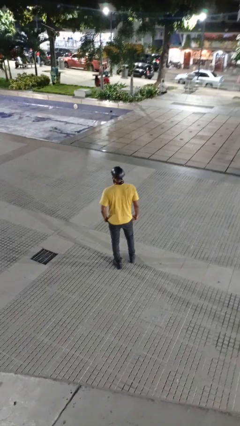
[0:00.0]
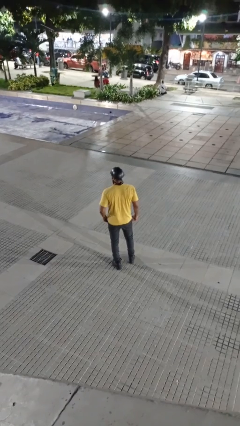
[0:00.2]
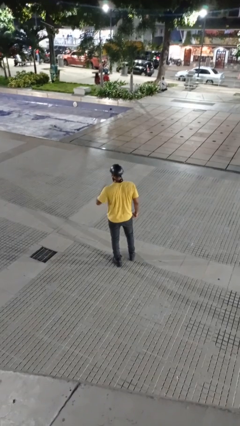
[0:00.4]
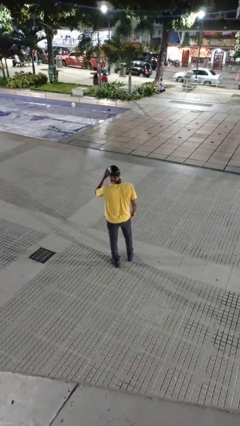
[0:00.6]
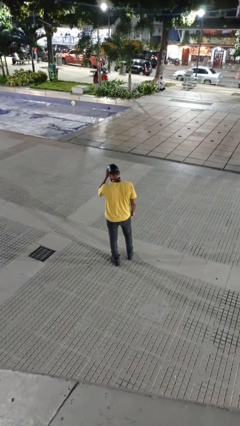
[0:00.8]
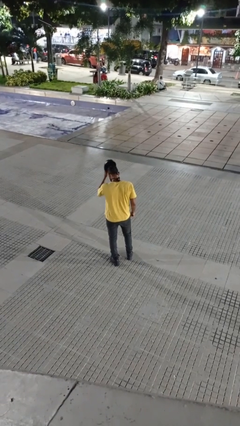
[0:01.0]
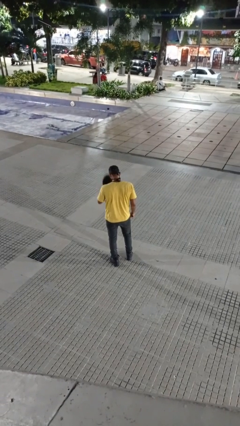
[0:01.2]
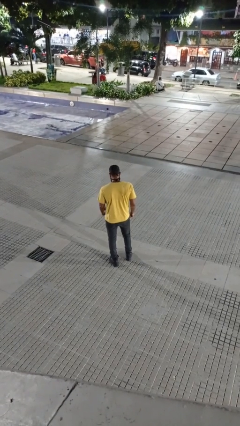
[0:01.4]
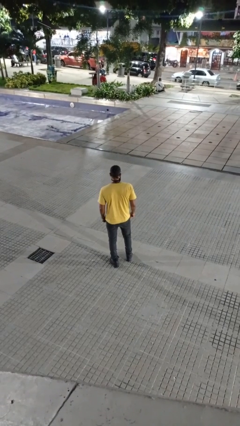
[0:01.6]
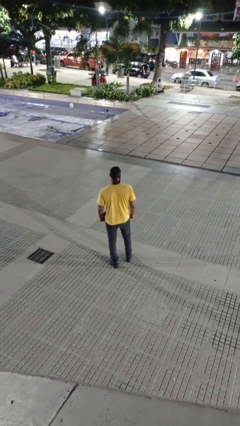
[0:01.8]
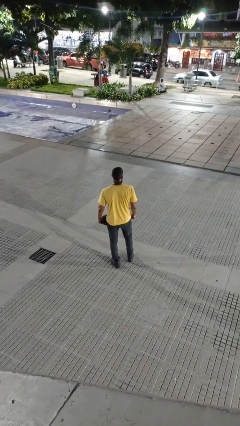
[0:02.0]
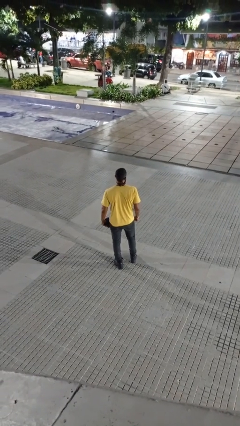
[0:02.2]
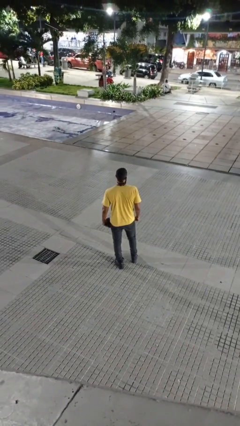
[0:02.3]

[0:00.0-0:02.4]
person takes off hat

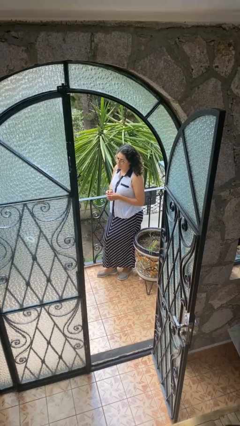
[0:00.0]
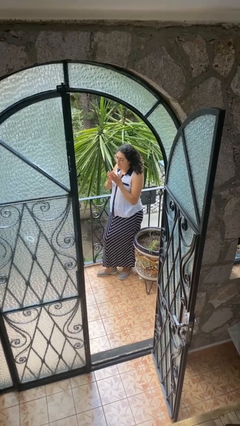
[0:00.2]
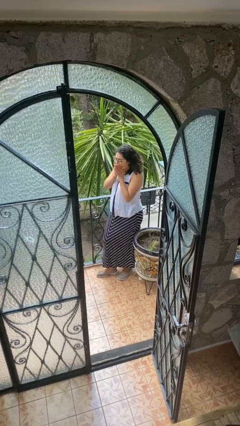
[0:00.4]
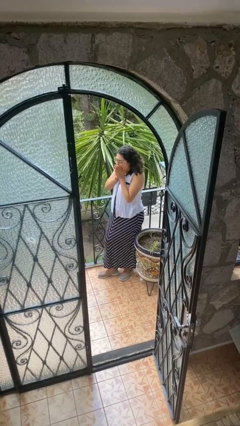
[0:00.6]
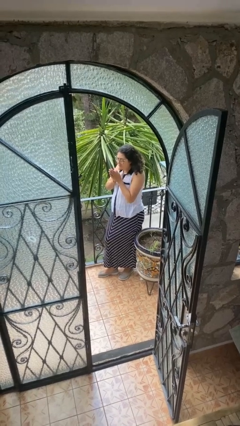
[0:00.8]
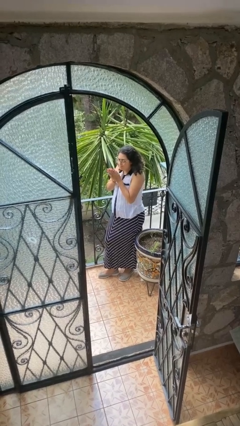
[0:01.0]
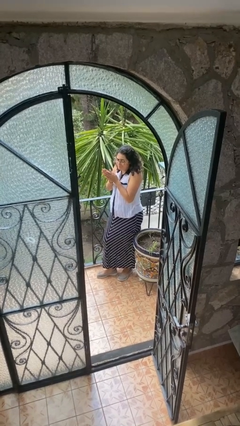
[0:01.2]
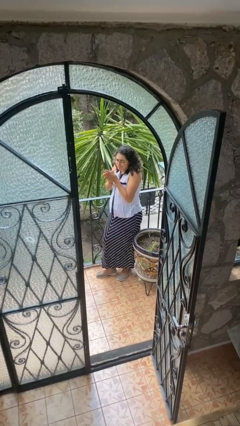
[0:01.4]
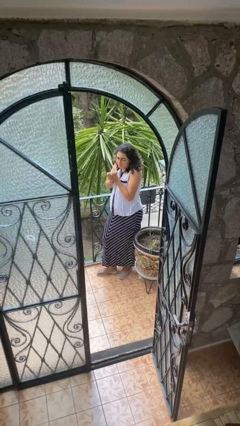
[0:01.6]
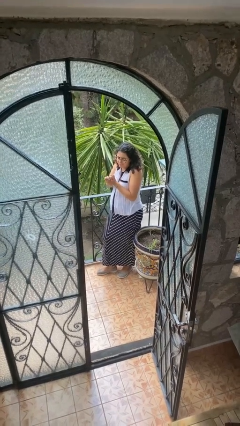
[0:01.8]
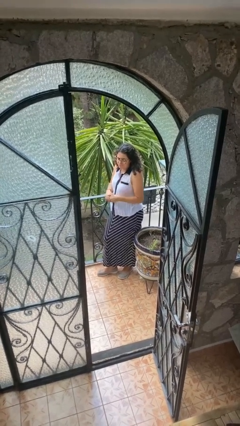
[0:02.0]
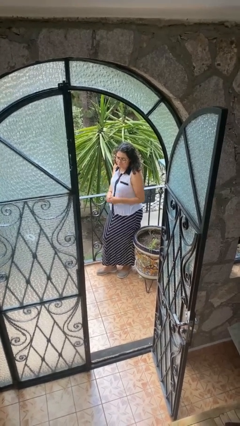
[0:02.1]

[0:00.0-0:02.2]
person blows into hands

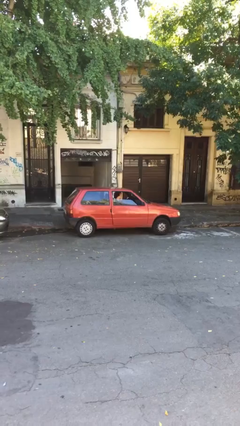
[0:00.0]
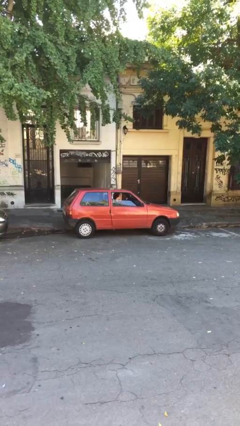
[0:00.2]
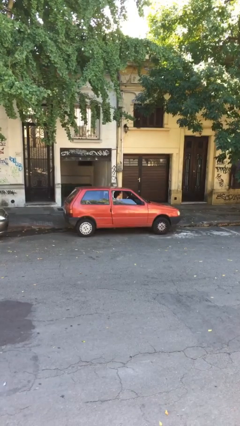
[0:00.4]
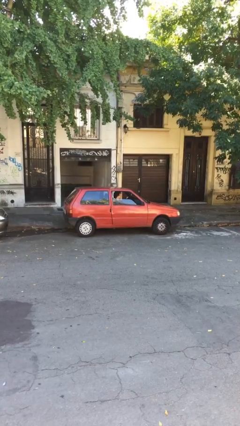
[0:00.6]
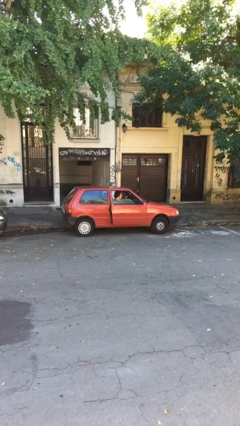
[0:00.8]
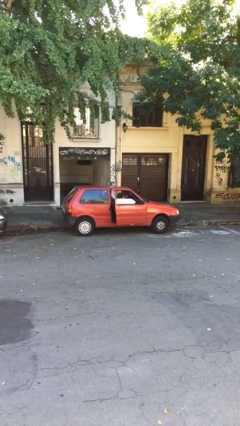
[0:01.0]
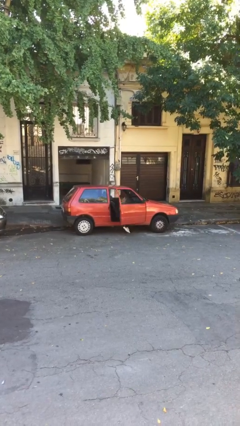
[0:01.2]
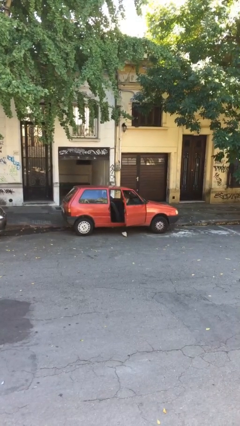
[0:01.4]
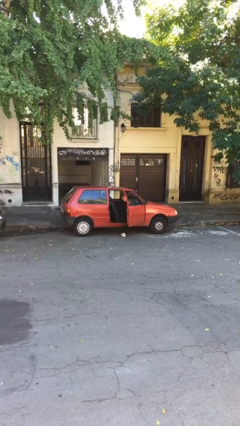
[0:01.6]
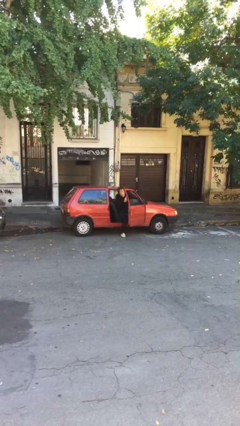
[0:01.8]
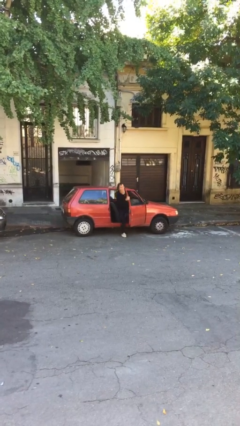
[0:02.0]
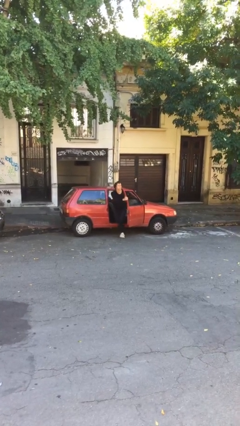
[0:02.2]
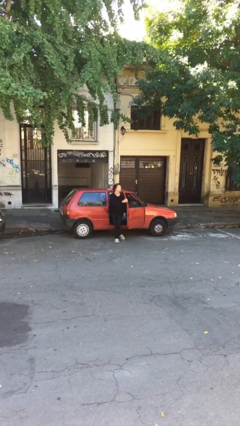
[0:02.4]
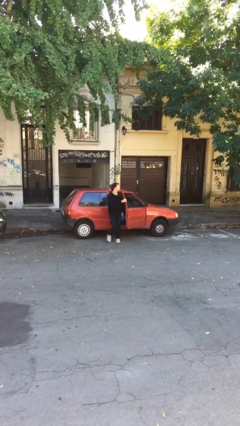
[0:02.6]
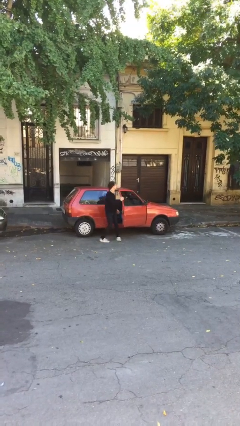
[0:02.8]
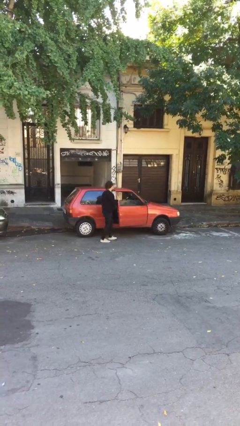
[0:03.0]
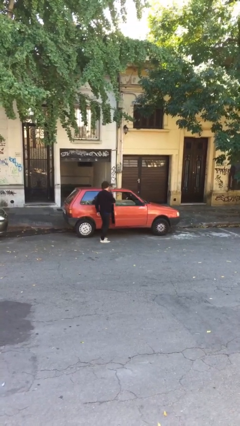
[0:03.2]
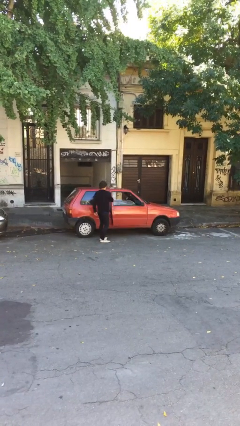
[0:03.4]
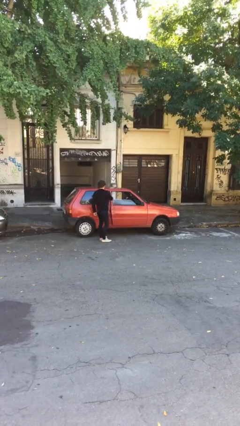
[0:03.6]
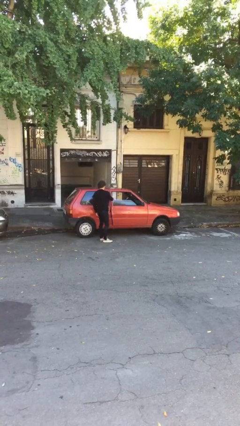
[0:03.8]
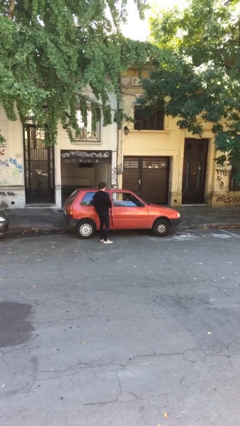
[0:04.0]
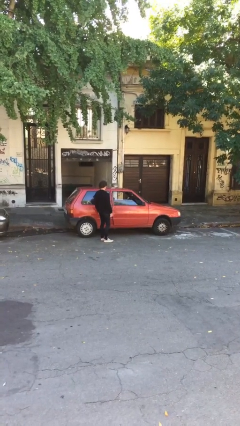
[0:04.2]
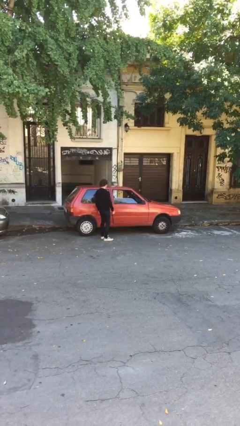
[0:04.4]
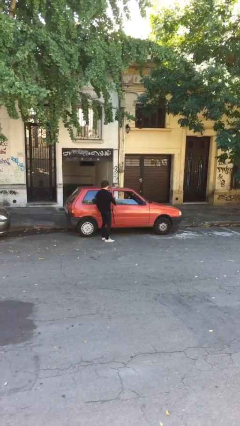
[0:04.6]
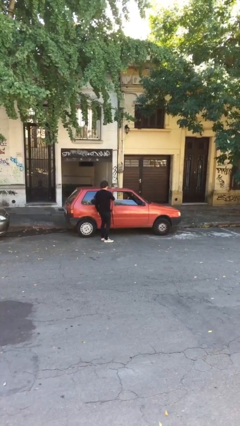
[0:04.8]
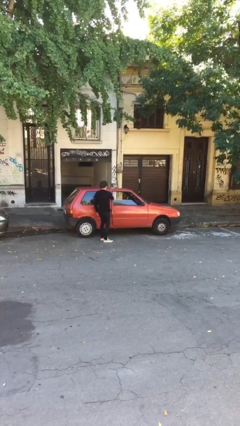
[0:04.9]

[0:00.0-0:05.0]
car drops off person

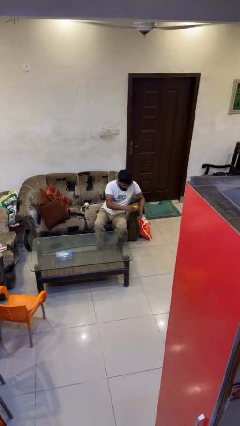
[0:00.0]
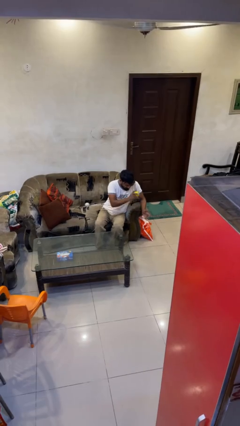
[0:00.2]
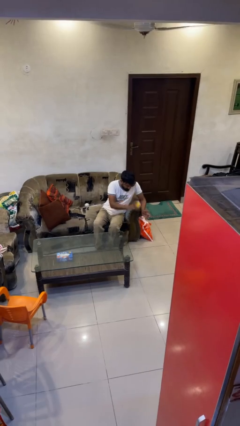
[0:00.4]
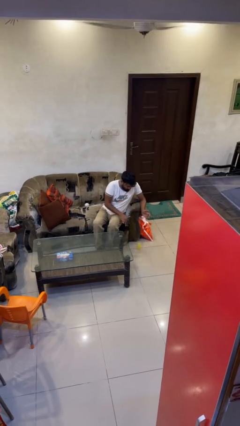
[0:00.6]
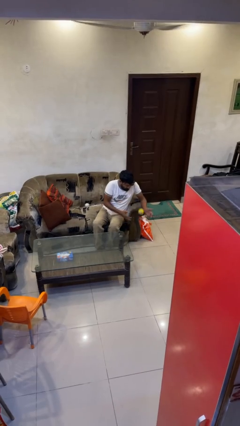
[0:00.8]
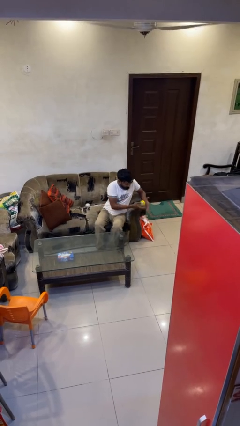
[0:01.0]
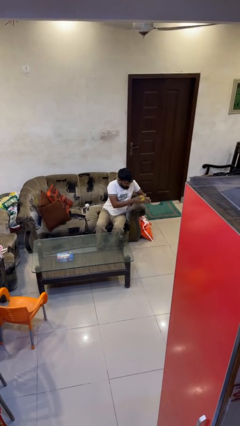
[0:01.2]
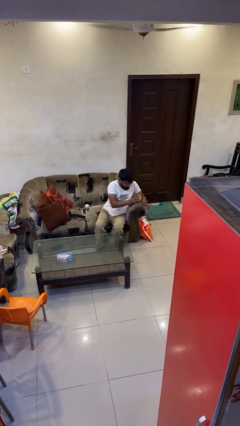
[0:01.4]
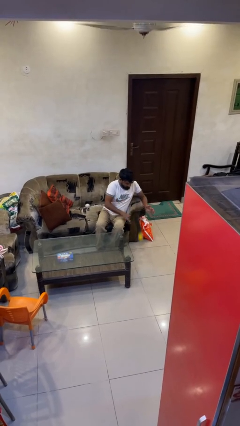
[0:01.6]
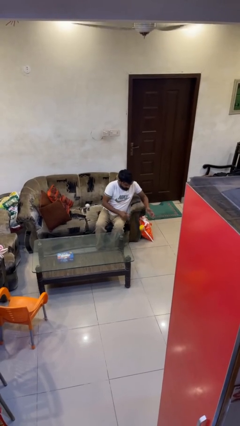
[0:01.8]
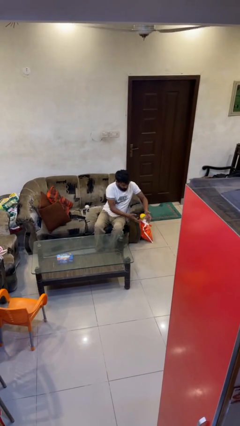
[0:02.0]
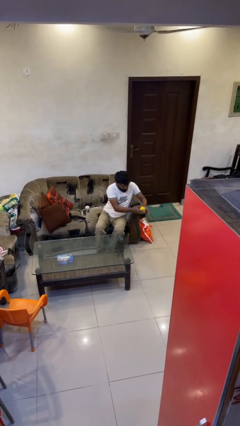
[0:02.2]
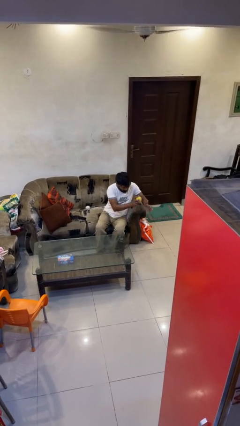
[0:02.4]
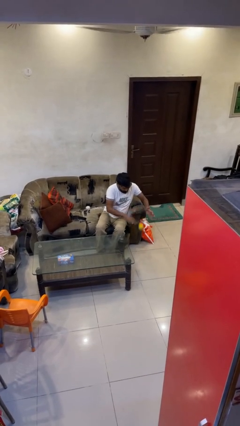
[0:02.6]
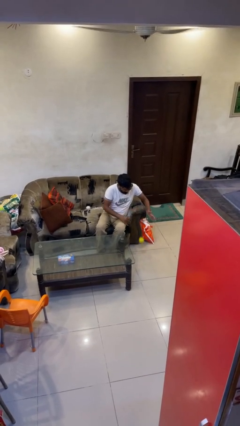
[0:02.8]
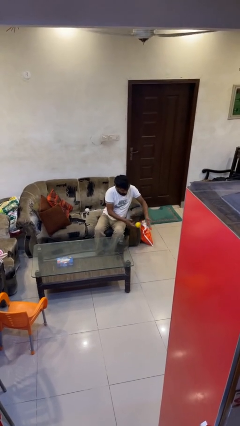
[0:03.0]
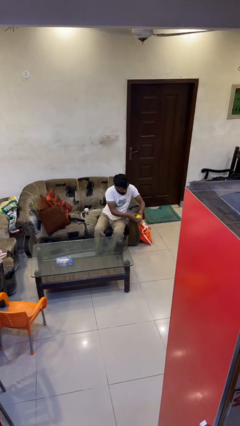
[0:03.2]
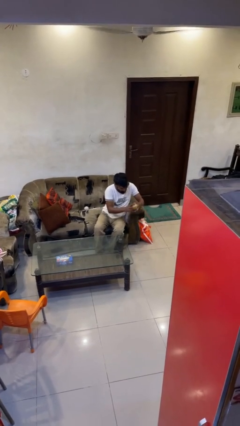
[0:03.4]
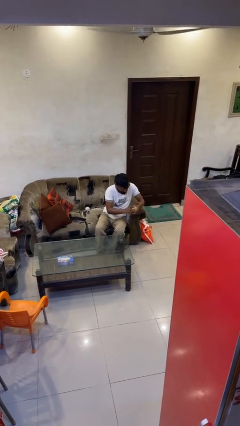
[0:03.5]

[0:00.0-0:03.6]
person bounces ball on floor

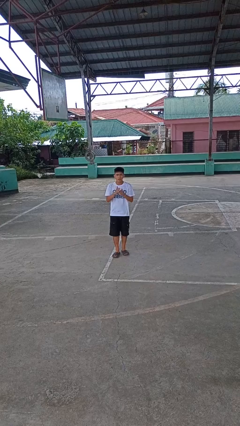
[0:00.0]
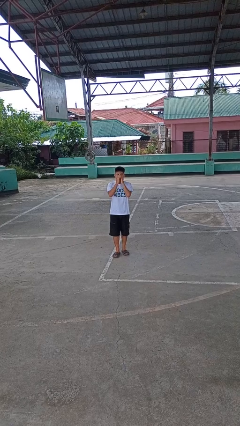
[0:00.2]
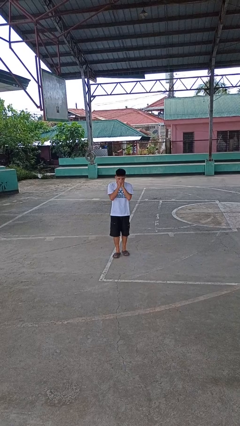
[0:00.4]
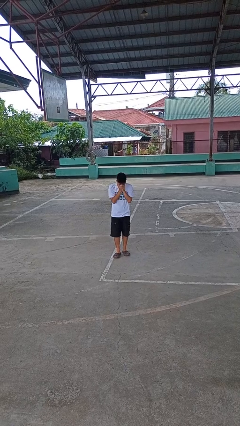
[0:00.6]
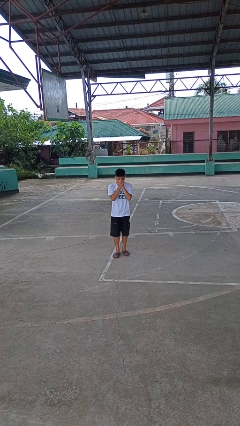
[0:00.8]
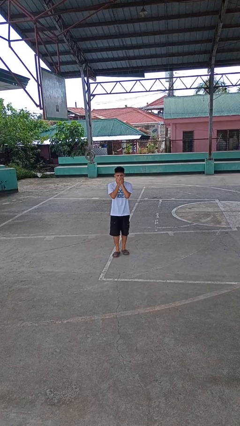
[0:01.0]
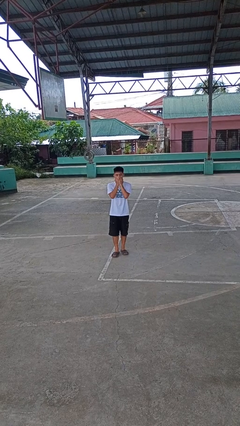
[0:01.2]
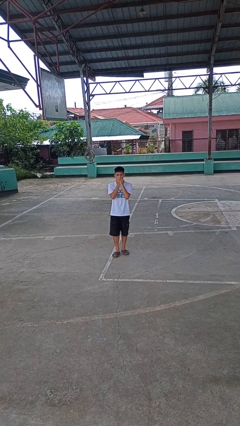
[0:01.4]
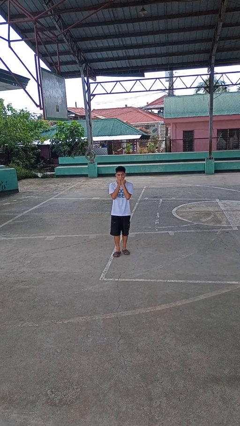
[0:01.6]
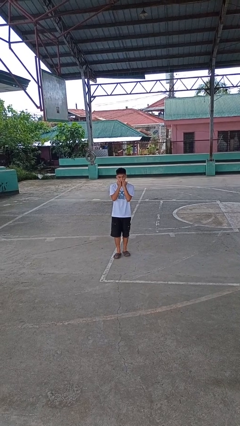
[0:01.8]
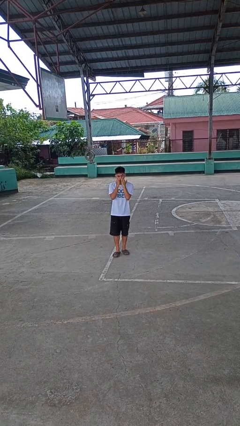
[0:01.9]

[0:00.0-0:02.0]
person sneezes into hand

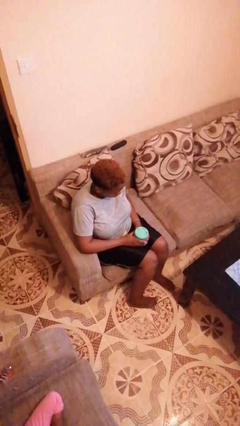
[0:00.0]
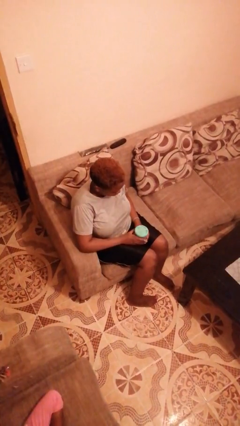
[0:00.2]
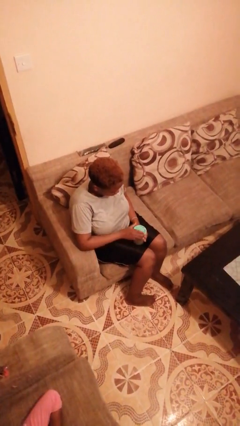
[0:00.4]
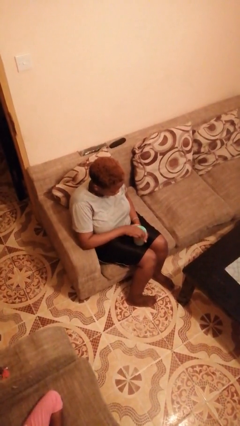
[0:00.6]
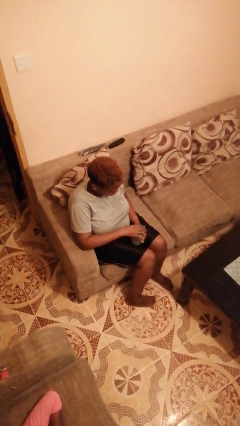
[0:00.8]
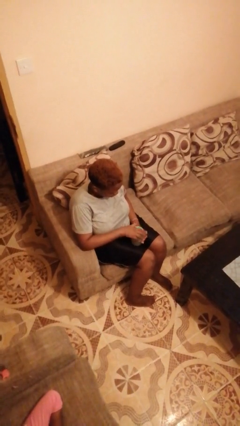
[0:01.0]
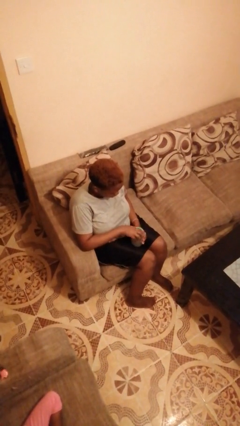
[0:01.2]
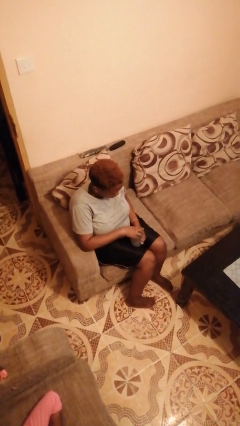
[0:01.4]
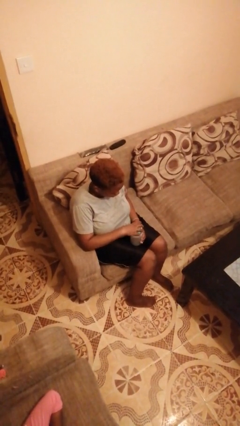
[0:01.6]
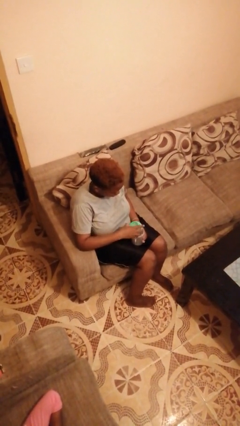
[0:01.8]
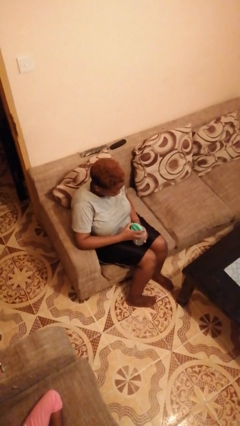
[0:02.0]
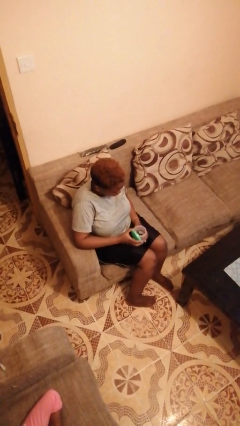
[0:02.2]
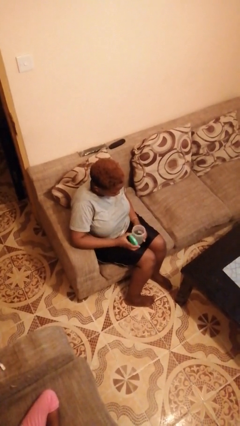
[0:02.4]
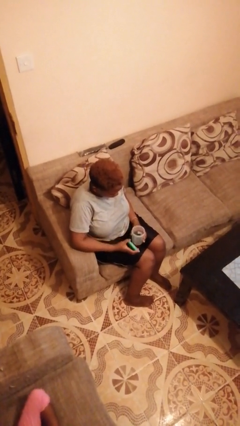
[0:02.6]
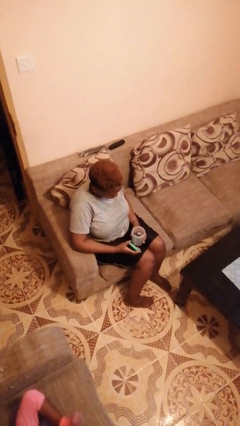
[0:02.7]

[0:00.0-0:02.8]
person opens jar
